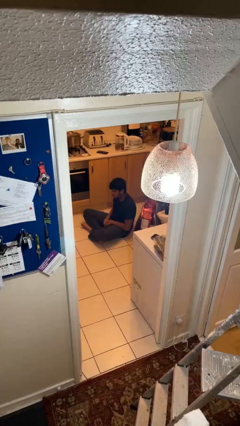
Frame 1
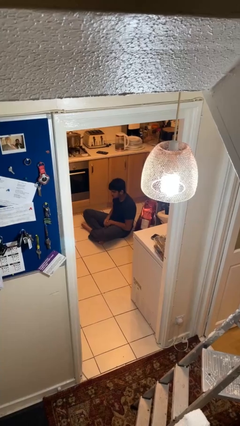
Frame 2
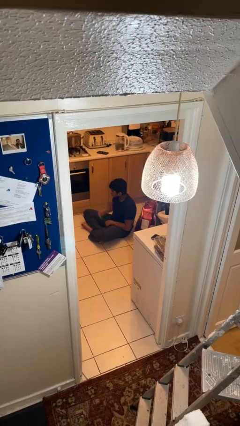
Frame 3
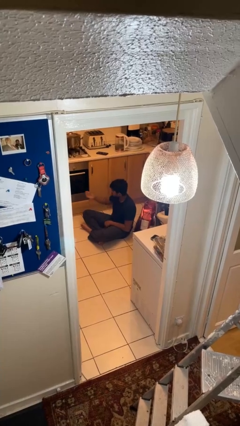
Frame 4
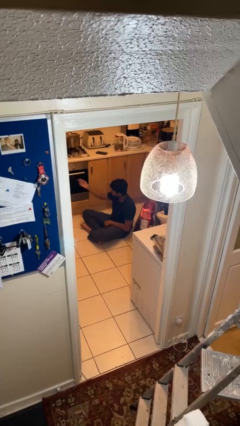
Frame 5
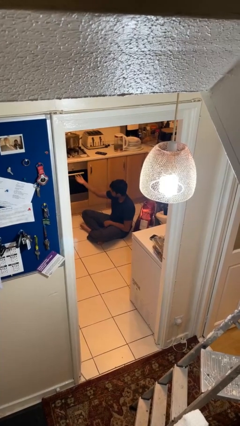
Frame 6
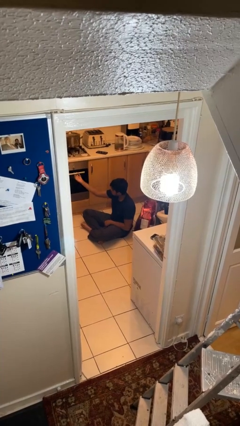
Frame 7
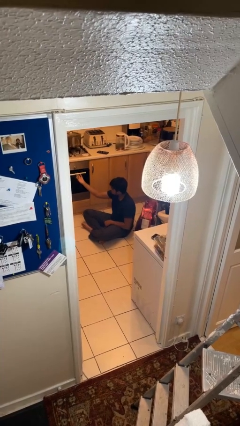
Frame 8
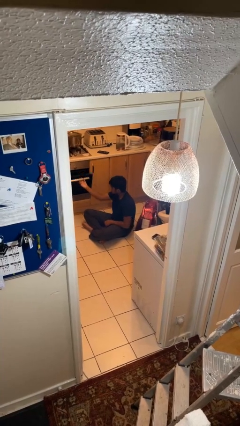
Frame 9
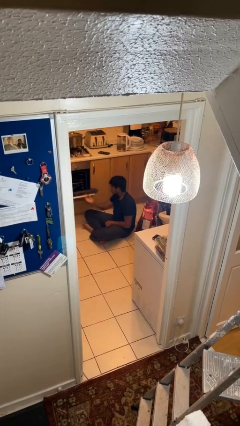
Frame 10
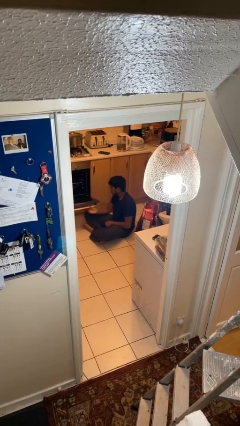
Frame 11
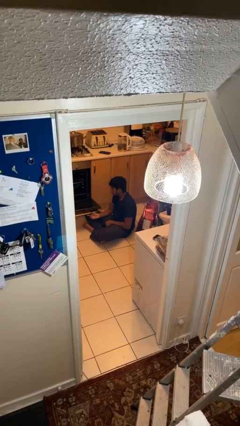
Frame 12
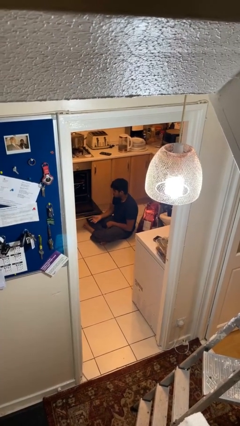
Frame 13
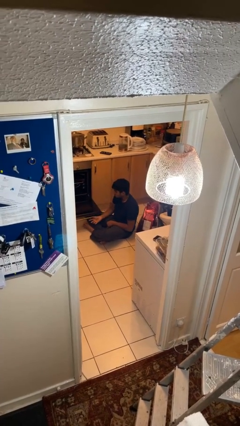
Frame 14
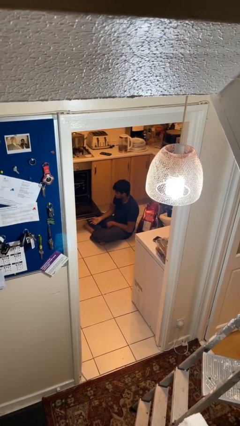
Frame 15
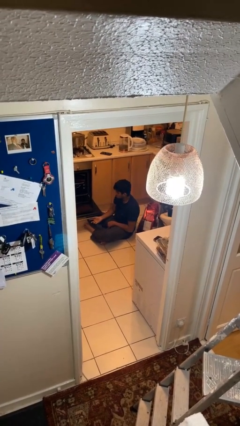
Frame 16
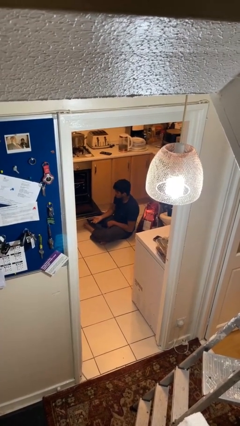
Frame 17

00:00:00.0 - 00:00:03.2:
person opens oven door

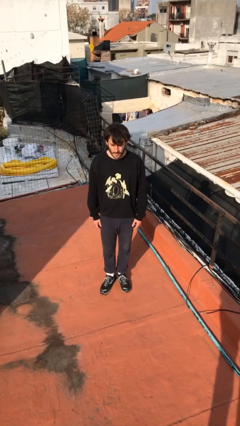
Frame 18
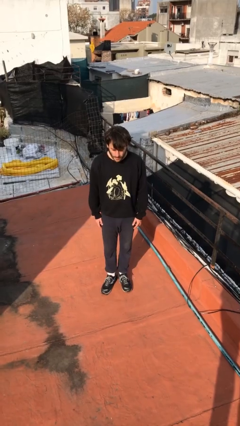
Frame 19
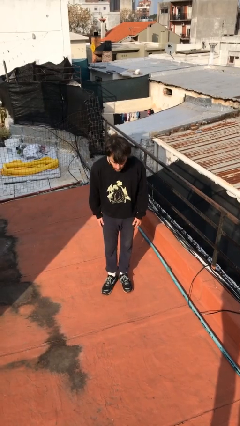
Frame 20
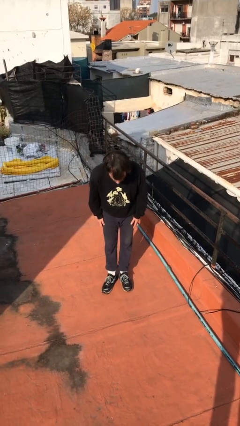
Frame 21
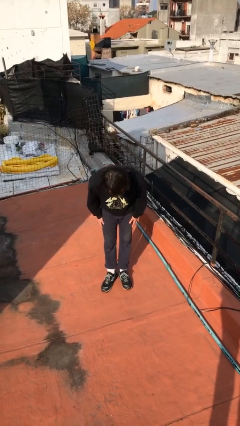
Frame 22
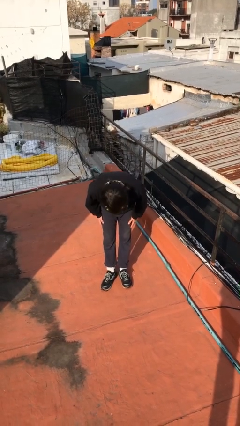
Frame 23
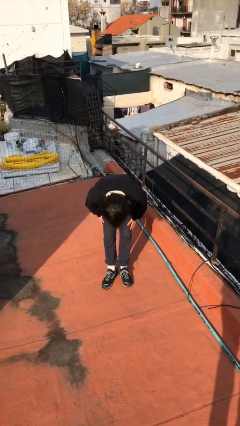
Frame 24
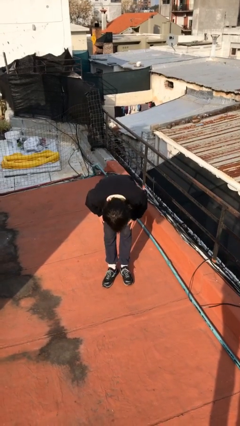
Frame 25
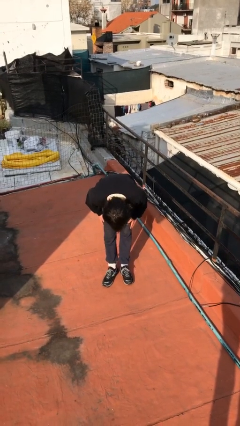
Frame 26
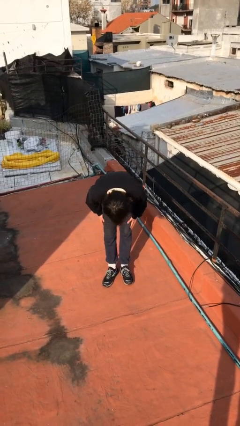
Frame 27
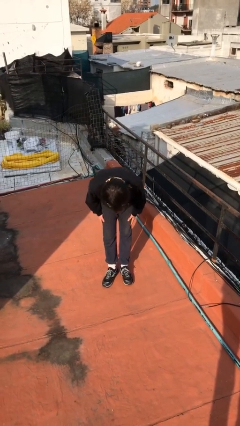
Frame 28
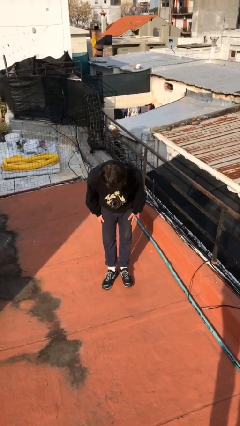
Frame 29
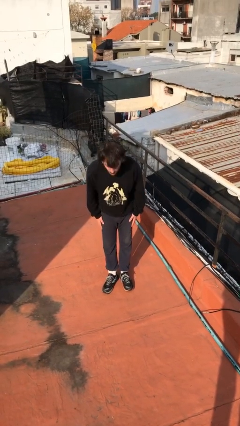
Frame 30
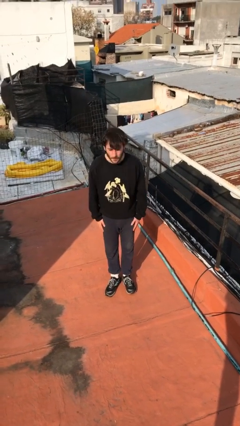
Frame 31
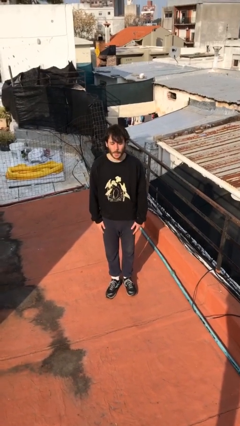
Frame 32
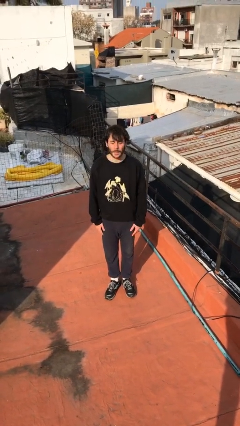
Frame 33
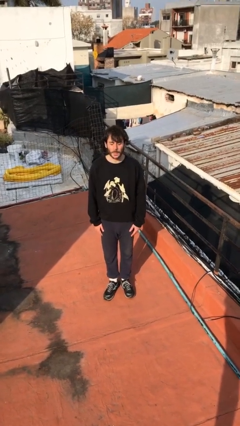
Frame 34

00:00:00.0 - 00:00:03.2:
person bows

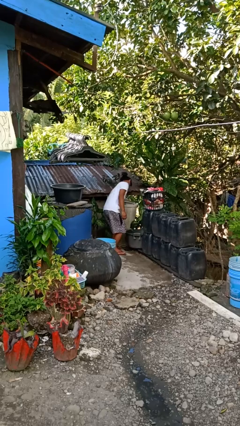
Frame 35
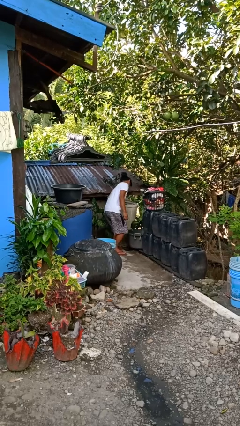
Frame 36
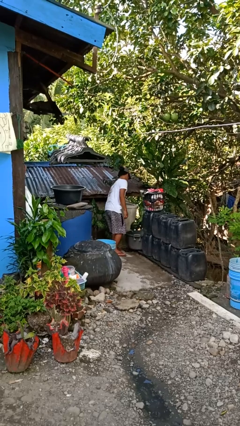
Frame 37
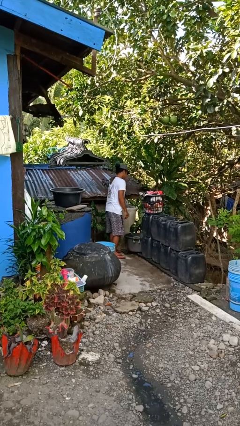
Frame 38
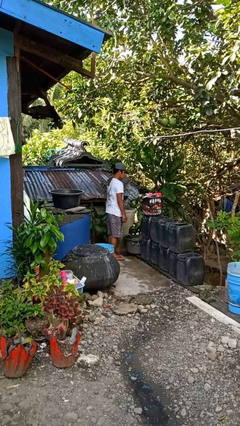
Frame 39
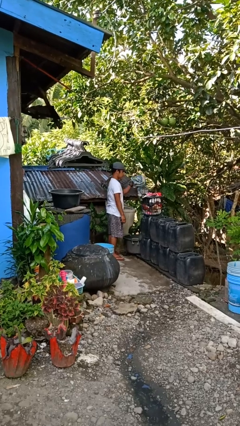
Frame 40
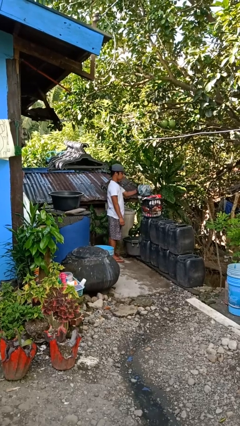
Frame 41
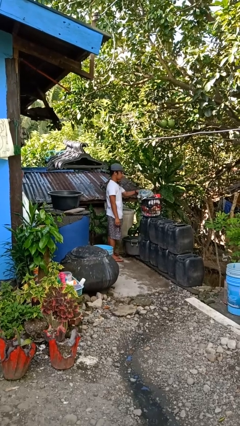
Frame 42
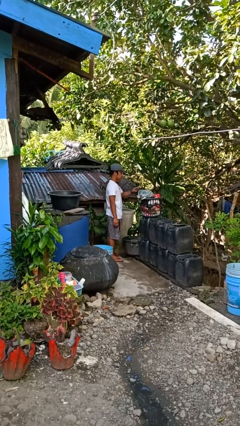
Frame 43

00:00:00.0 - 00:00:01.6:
person unloads dryer

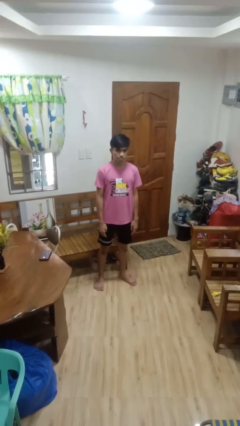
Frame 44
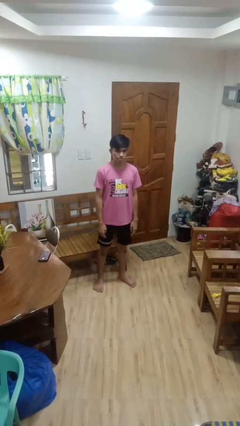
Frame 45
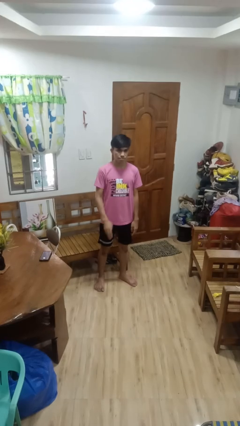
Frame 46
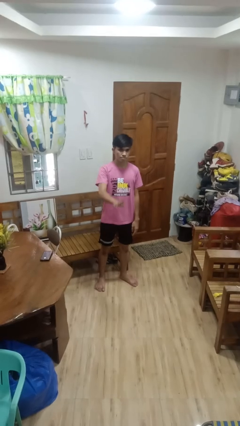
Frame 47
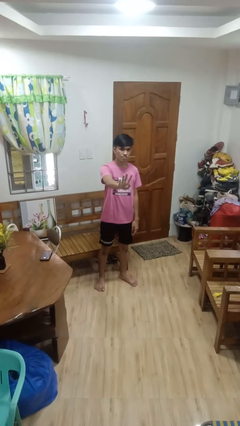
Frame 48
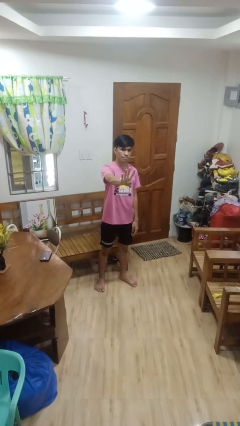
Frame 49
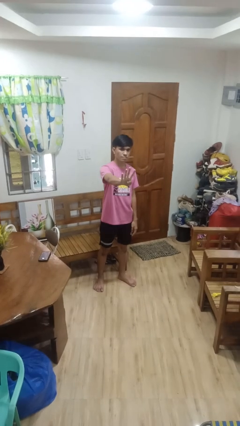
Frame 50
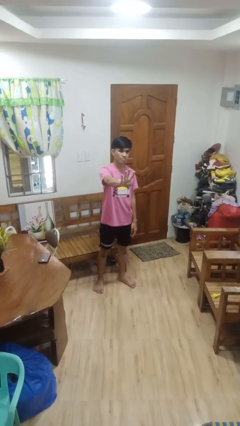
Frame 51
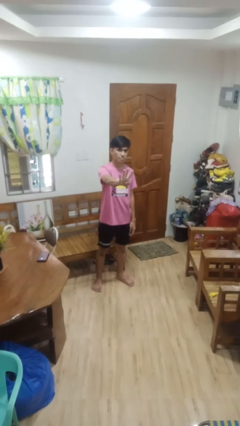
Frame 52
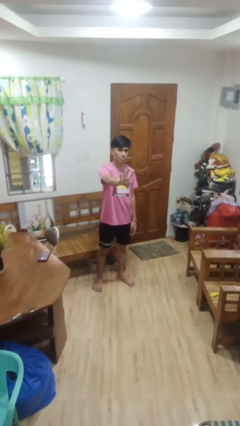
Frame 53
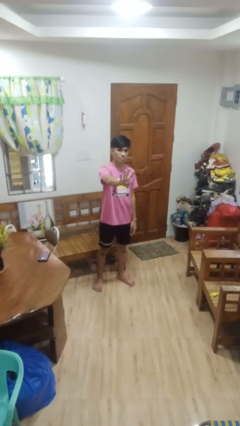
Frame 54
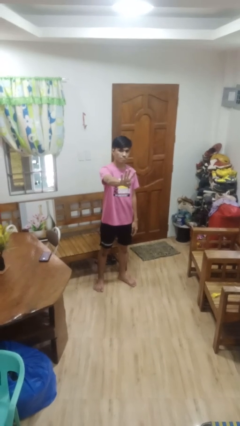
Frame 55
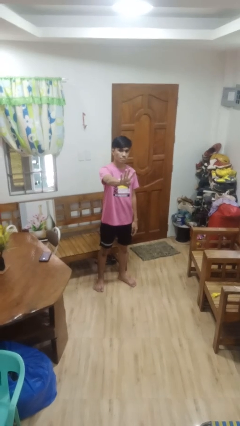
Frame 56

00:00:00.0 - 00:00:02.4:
person gestures number four

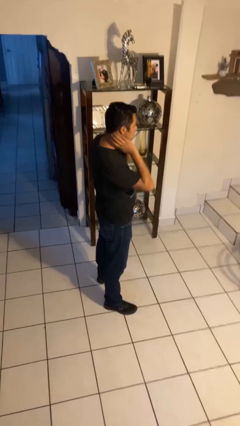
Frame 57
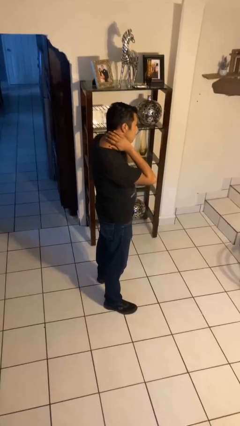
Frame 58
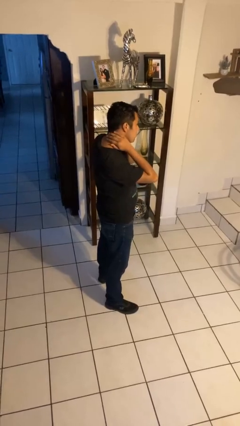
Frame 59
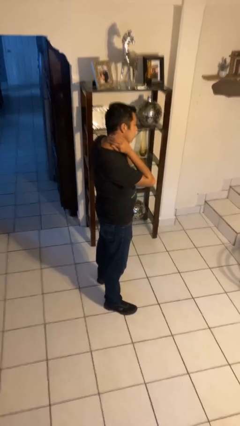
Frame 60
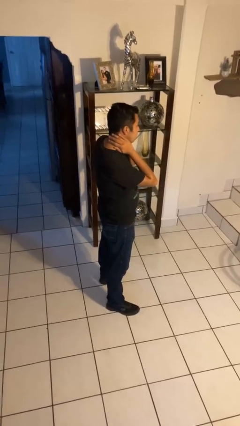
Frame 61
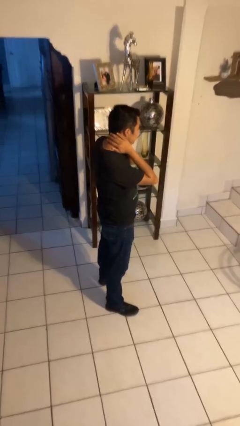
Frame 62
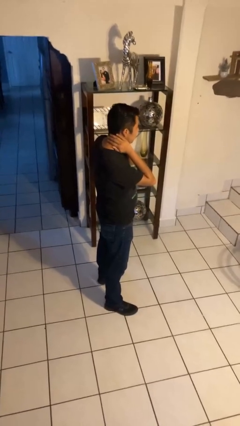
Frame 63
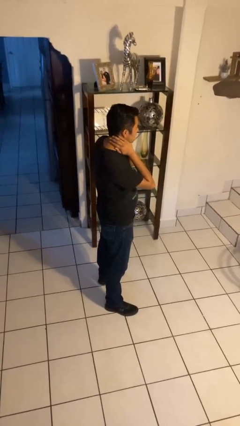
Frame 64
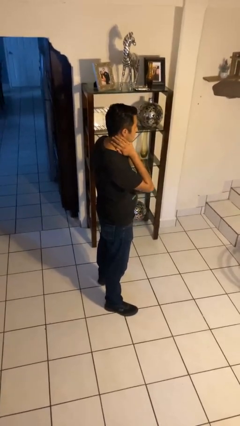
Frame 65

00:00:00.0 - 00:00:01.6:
person rubs neck

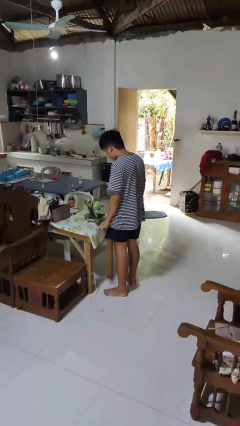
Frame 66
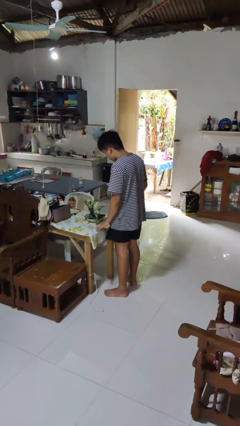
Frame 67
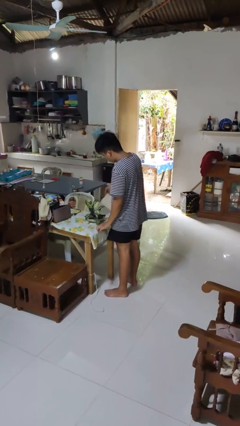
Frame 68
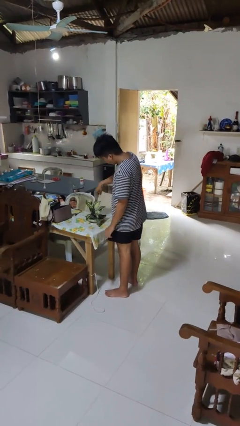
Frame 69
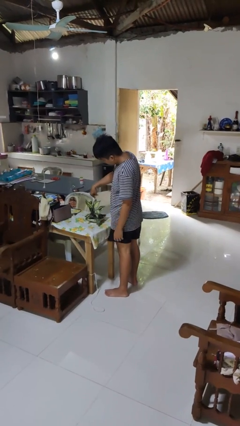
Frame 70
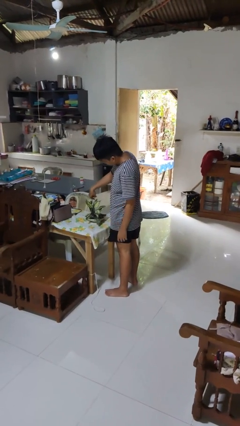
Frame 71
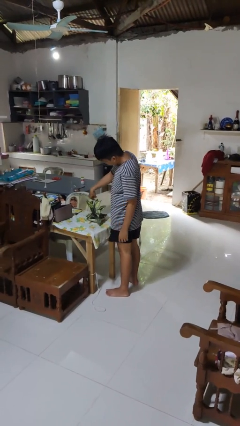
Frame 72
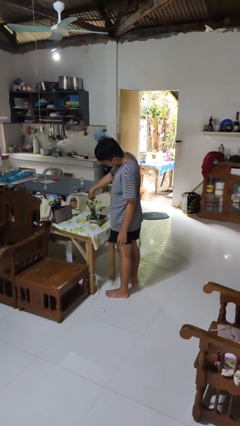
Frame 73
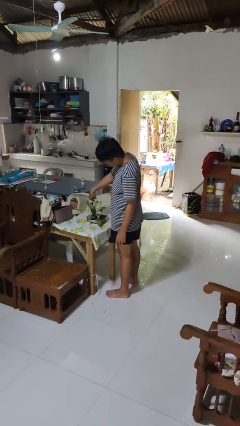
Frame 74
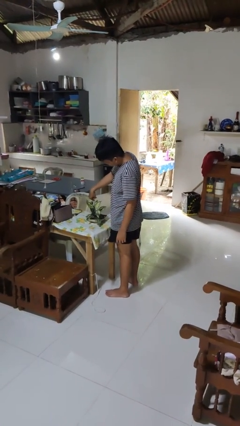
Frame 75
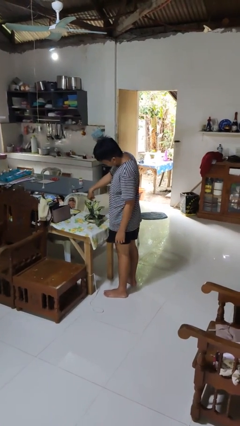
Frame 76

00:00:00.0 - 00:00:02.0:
person waters houseplant

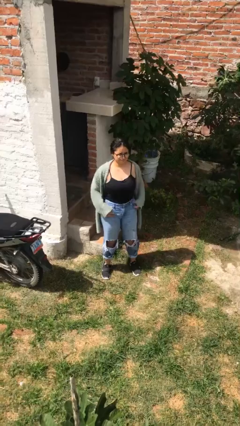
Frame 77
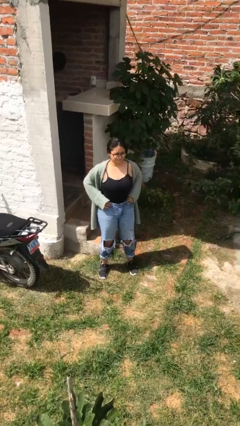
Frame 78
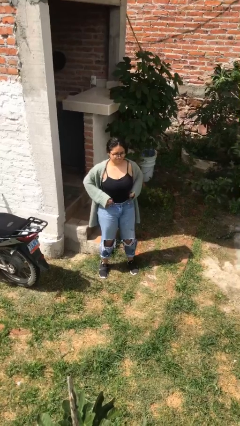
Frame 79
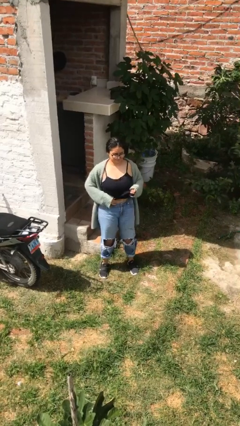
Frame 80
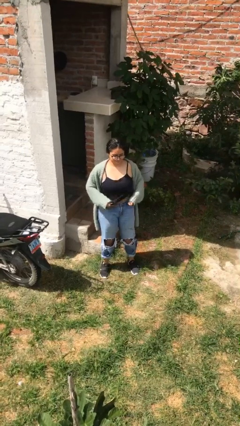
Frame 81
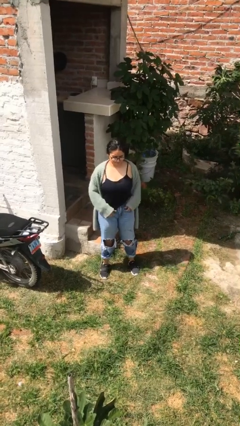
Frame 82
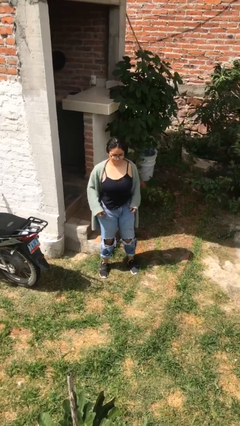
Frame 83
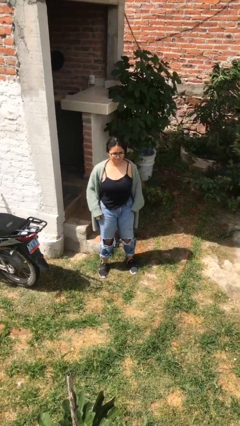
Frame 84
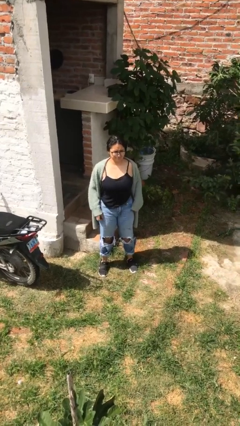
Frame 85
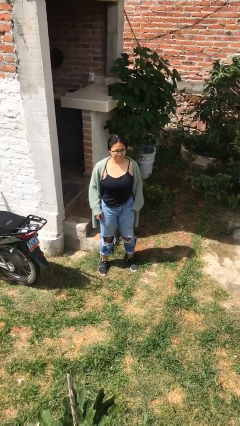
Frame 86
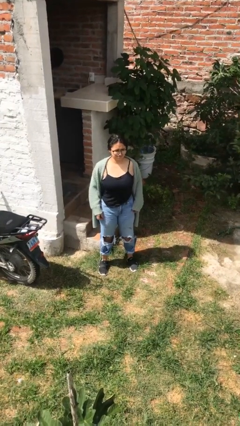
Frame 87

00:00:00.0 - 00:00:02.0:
person untucks shirt

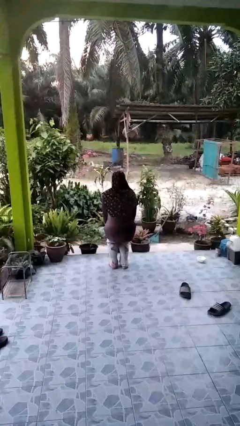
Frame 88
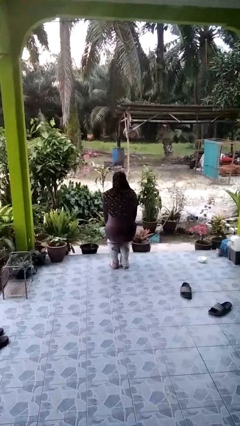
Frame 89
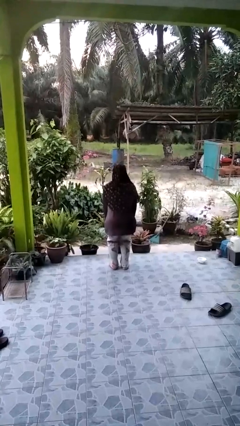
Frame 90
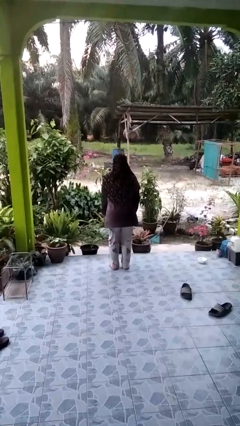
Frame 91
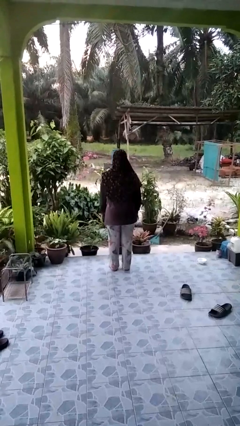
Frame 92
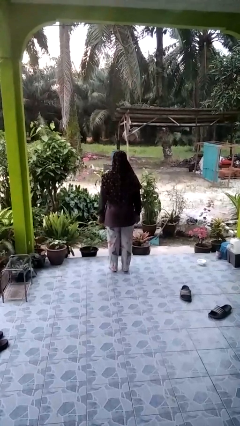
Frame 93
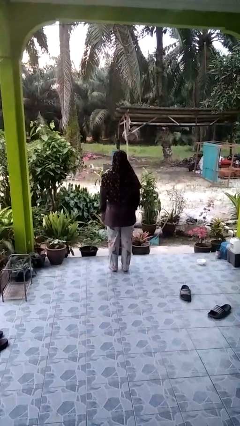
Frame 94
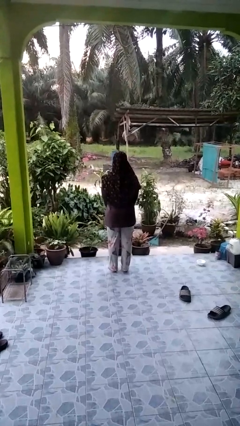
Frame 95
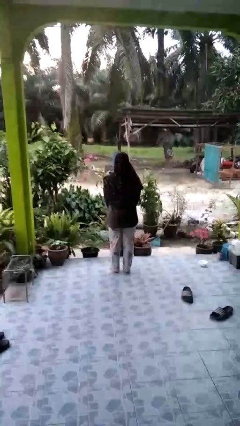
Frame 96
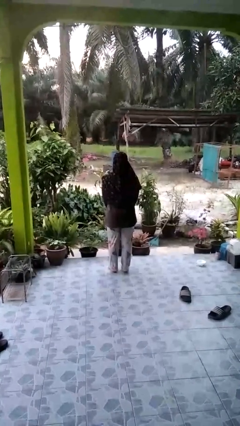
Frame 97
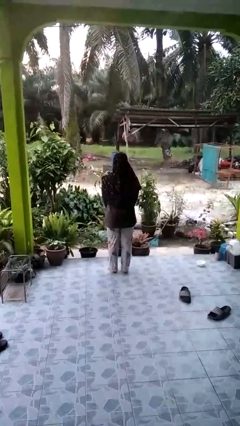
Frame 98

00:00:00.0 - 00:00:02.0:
person stands up
